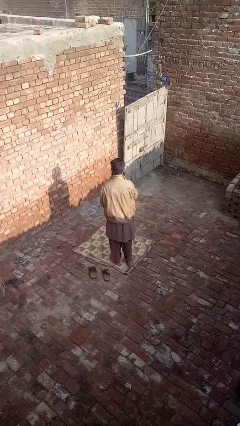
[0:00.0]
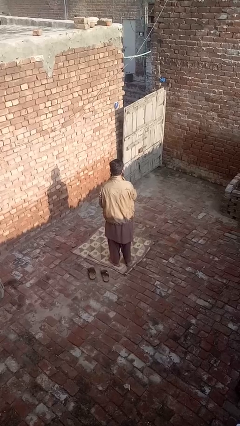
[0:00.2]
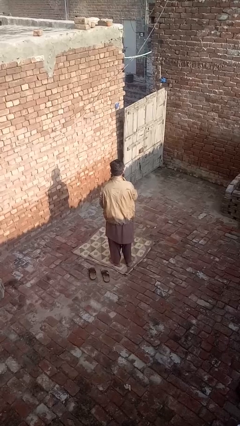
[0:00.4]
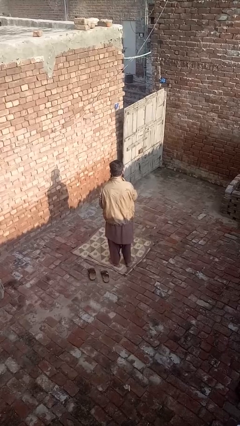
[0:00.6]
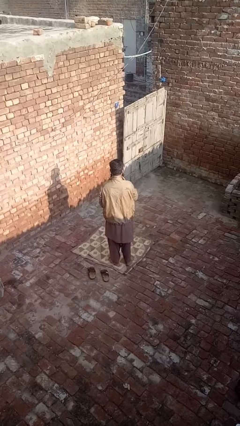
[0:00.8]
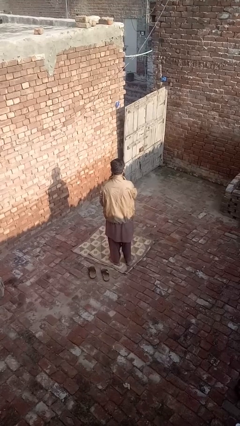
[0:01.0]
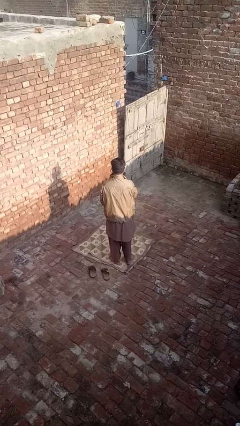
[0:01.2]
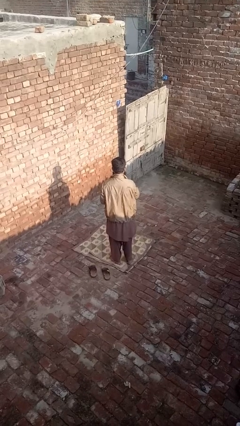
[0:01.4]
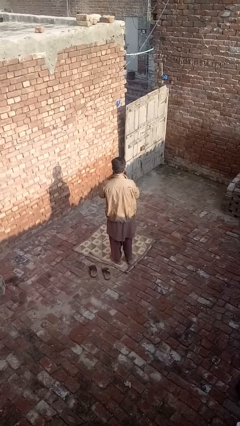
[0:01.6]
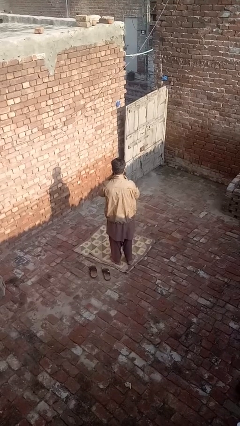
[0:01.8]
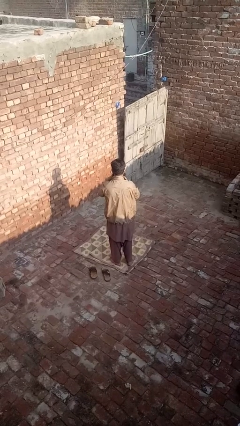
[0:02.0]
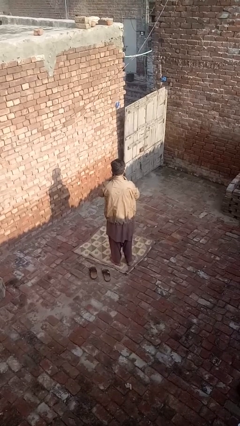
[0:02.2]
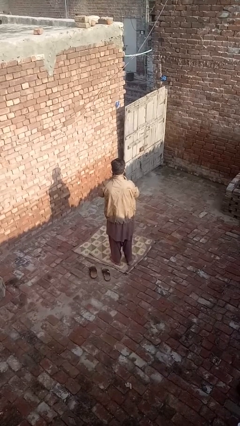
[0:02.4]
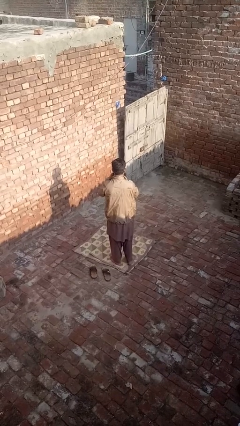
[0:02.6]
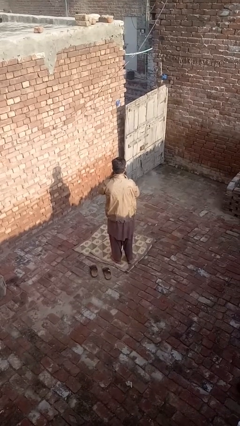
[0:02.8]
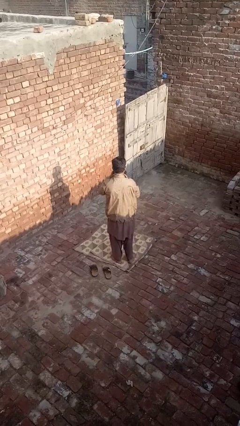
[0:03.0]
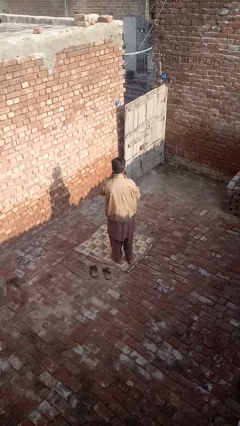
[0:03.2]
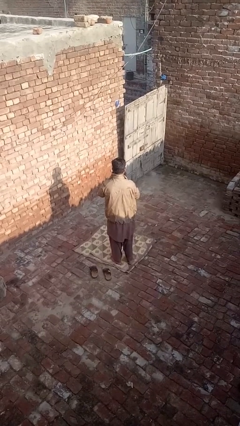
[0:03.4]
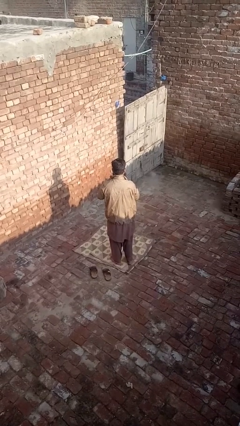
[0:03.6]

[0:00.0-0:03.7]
person unzips jacket

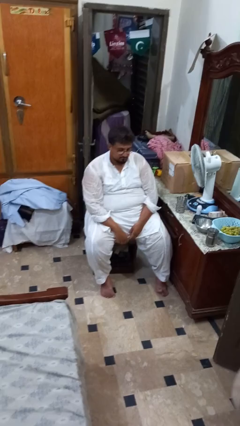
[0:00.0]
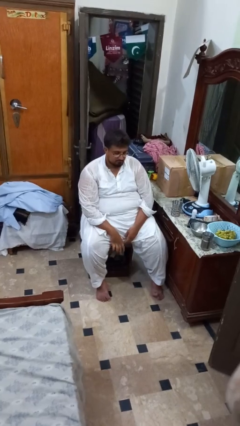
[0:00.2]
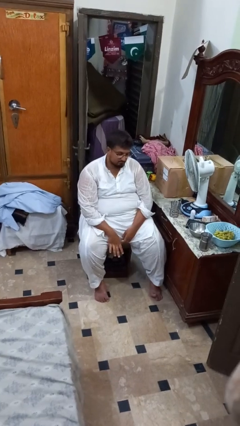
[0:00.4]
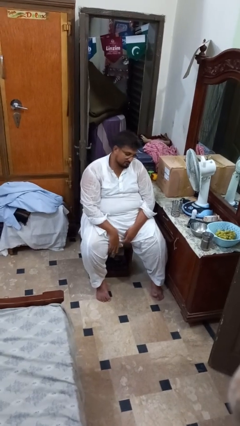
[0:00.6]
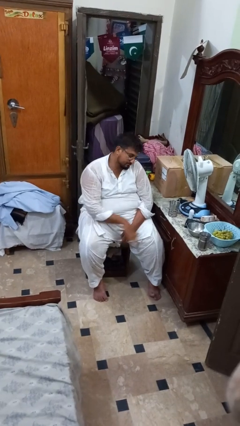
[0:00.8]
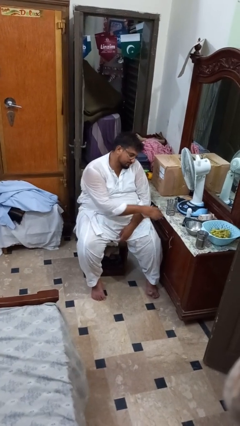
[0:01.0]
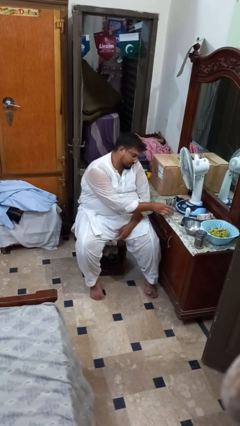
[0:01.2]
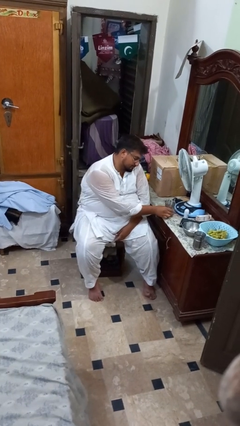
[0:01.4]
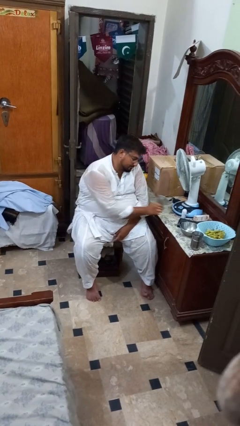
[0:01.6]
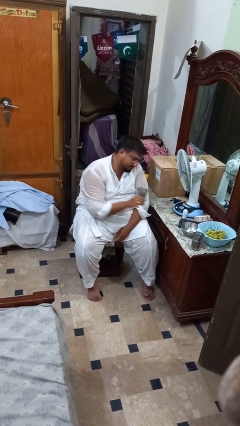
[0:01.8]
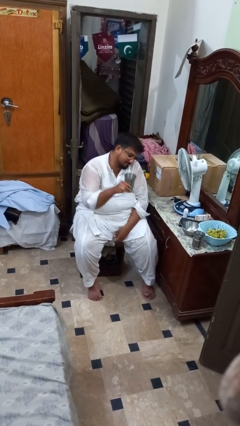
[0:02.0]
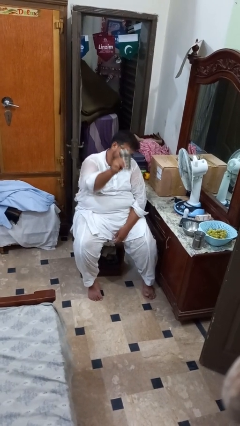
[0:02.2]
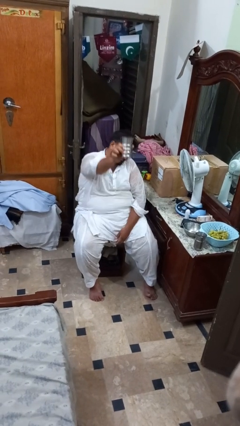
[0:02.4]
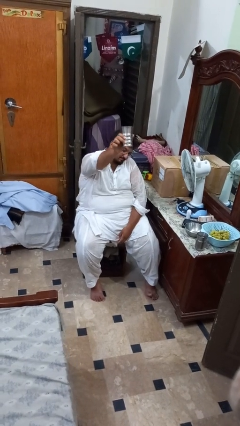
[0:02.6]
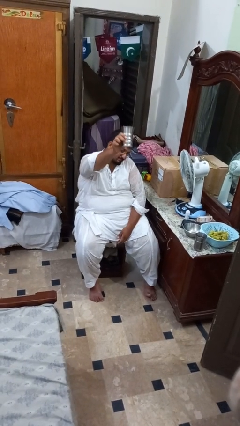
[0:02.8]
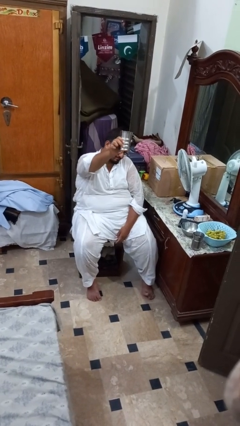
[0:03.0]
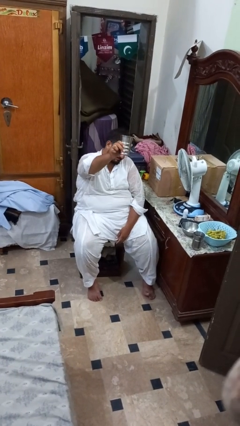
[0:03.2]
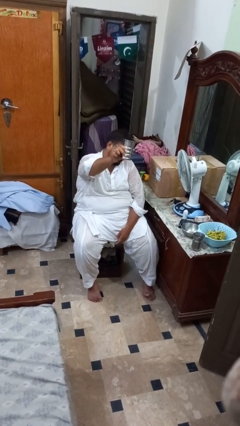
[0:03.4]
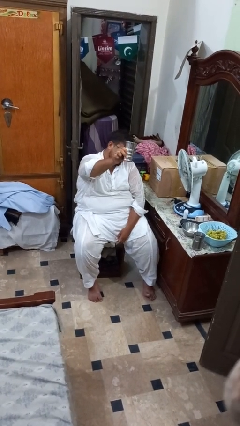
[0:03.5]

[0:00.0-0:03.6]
person picks up object from table

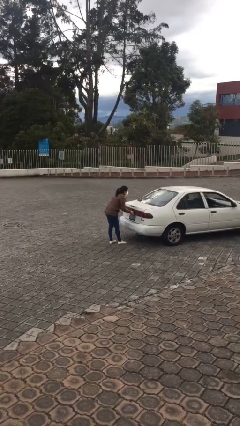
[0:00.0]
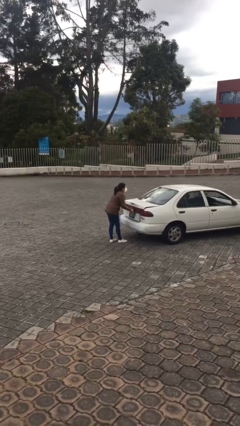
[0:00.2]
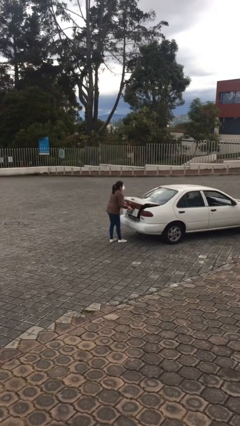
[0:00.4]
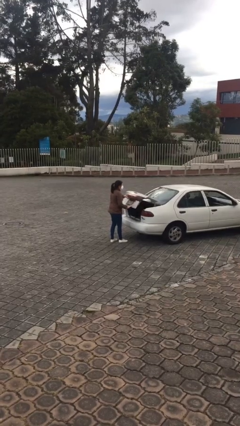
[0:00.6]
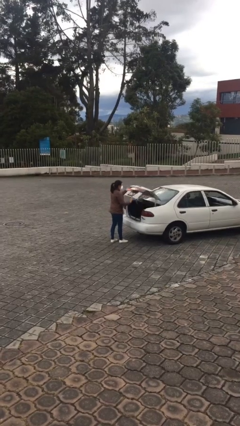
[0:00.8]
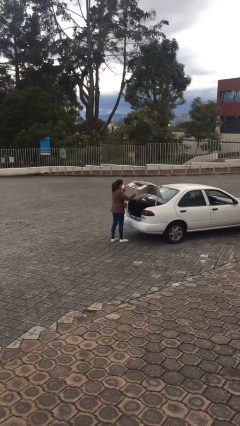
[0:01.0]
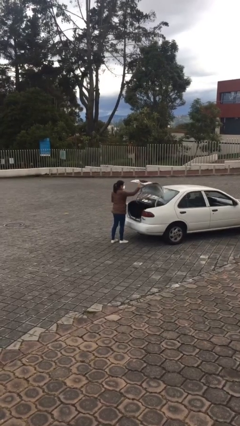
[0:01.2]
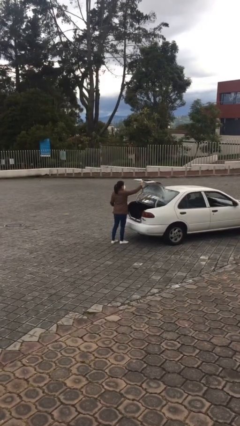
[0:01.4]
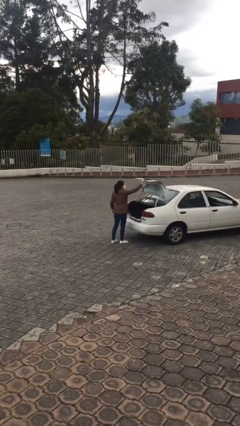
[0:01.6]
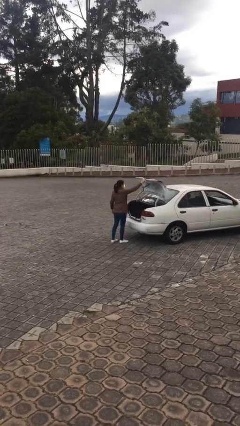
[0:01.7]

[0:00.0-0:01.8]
person opens car trunk

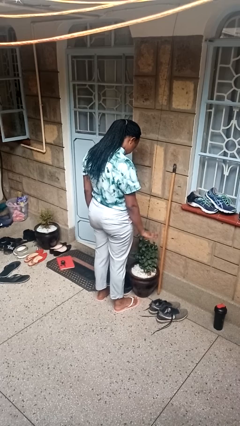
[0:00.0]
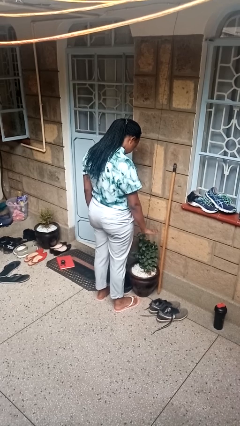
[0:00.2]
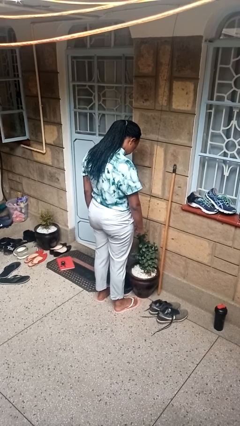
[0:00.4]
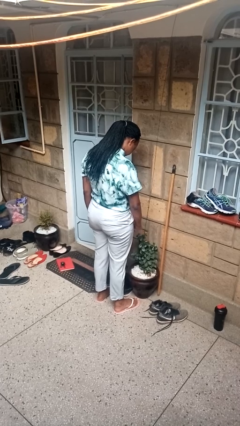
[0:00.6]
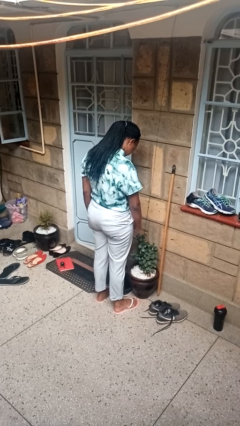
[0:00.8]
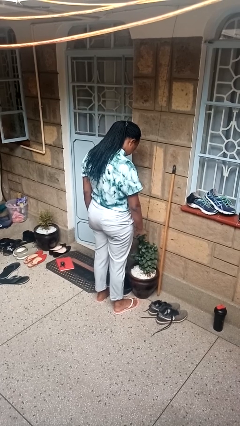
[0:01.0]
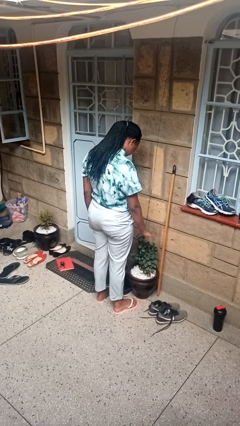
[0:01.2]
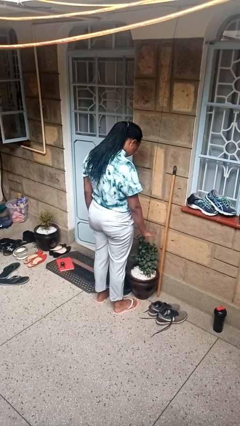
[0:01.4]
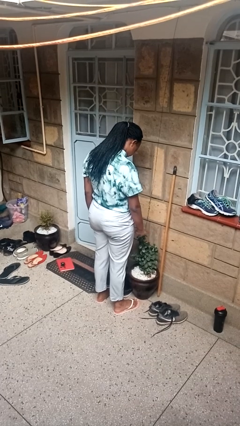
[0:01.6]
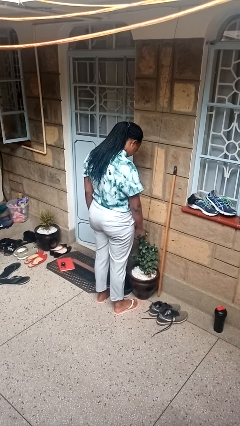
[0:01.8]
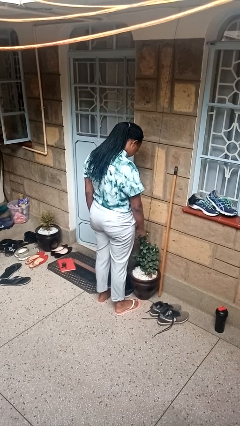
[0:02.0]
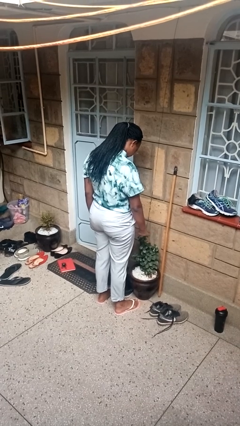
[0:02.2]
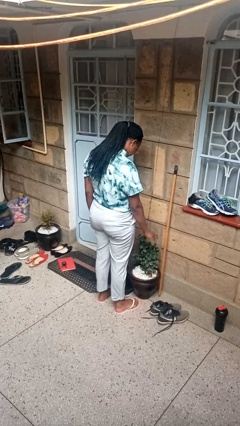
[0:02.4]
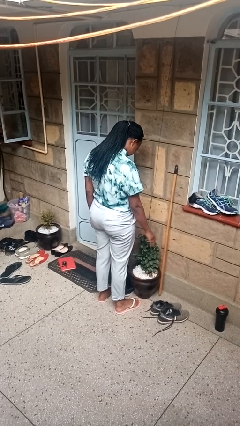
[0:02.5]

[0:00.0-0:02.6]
person waves hand over object

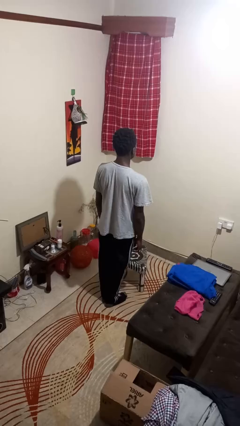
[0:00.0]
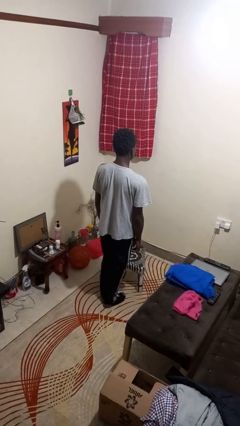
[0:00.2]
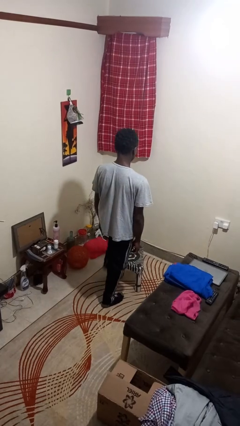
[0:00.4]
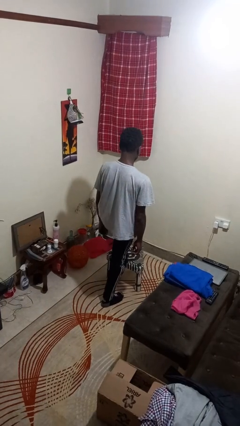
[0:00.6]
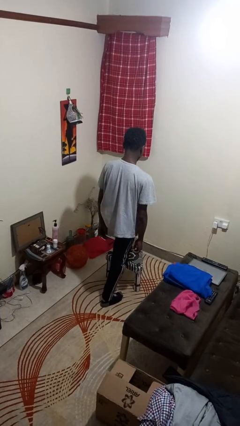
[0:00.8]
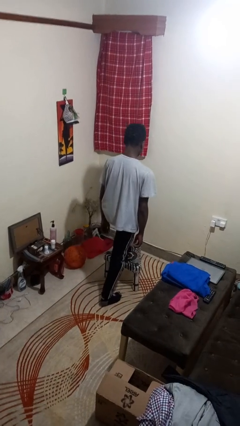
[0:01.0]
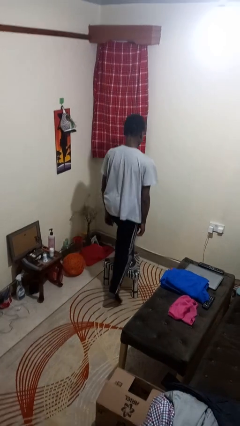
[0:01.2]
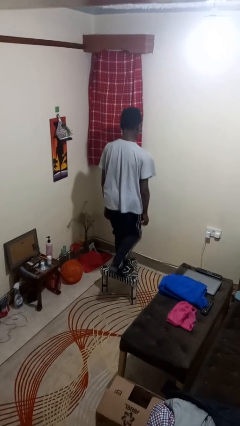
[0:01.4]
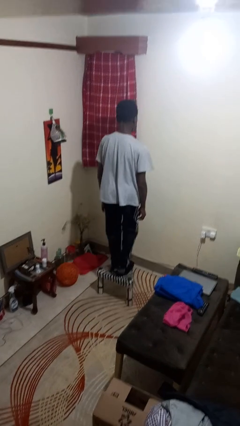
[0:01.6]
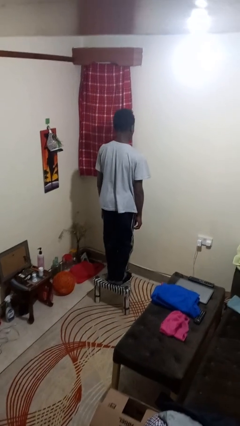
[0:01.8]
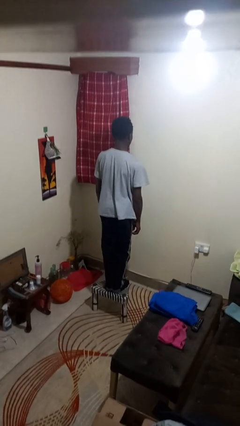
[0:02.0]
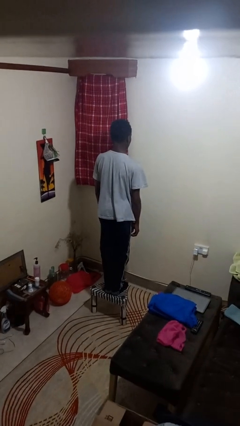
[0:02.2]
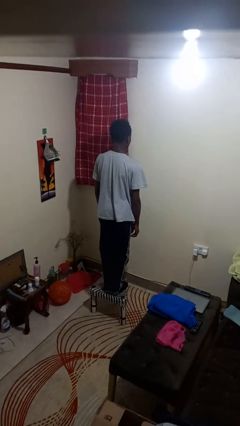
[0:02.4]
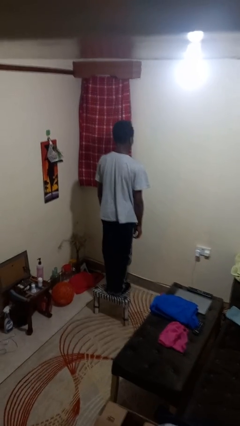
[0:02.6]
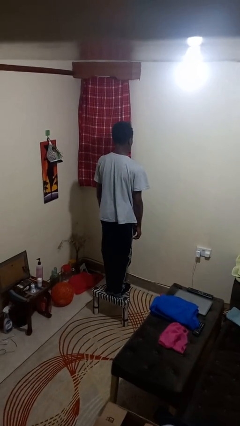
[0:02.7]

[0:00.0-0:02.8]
person climbs on chair

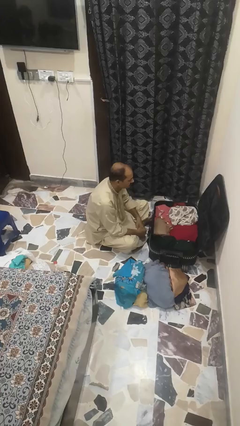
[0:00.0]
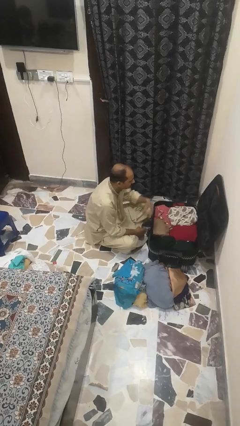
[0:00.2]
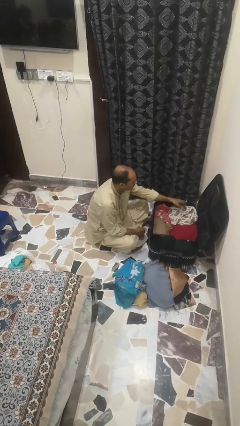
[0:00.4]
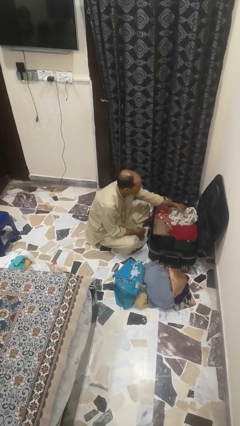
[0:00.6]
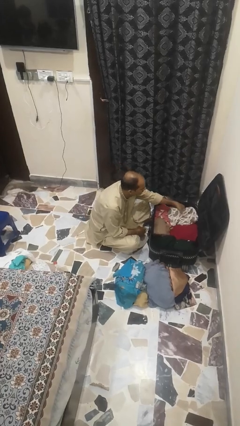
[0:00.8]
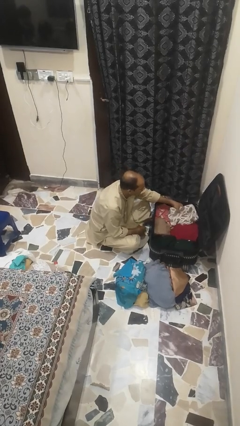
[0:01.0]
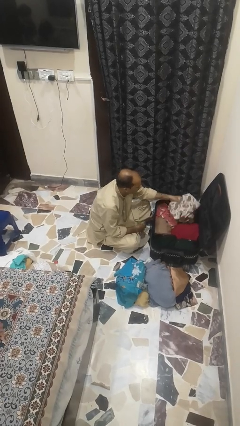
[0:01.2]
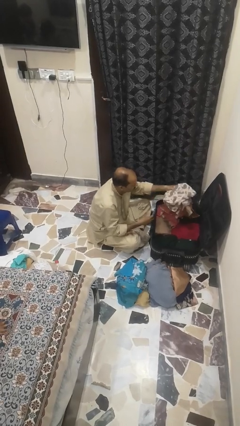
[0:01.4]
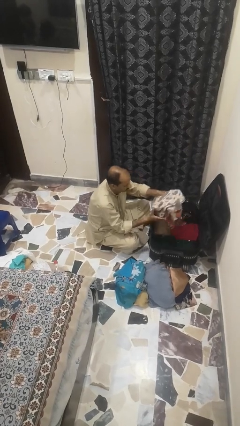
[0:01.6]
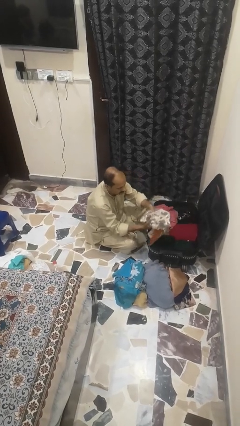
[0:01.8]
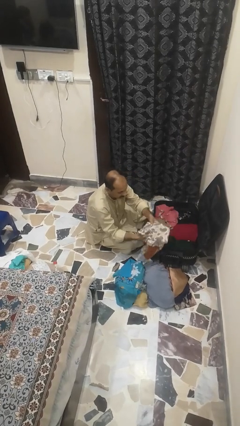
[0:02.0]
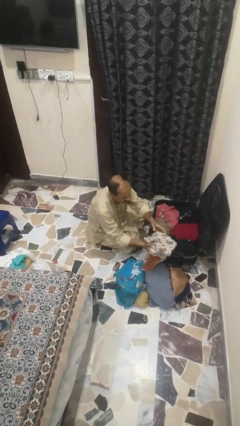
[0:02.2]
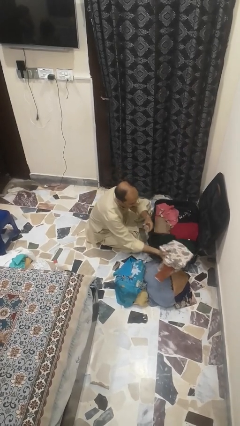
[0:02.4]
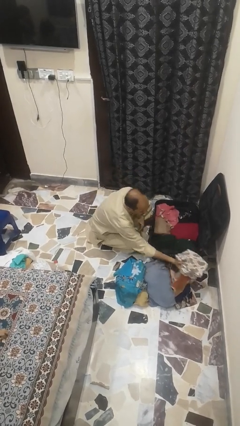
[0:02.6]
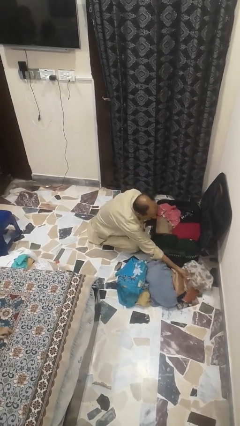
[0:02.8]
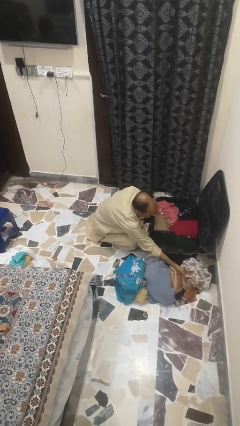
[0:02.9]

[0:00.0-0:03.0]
person unloads clothes from suitcase
